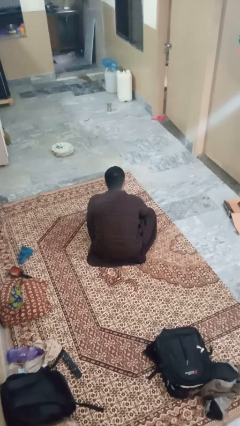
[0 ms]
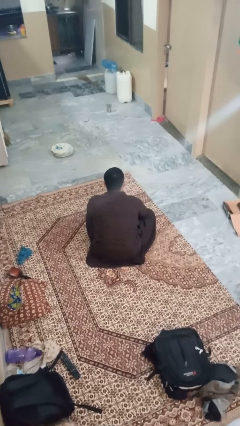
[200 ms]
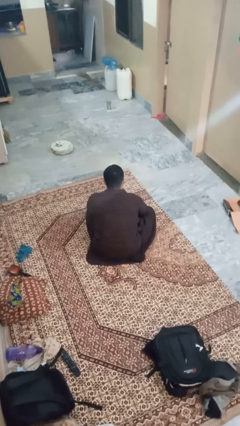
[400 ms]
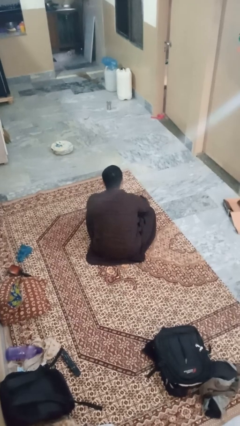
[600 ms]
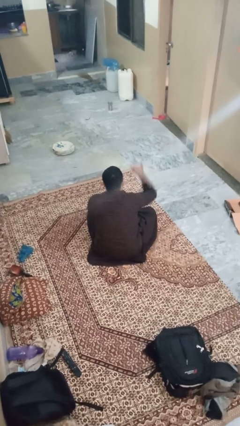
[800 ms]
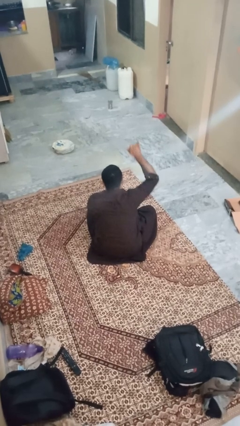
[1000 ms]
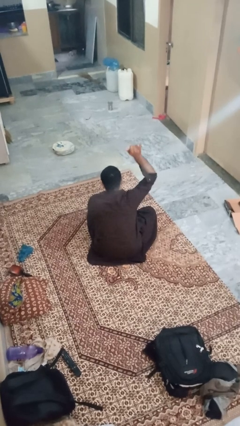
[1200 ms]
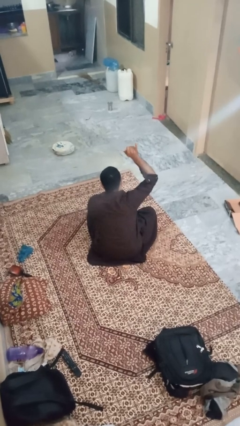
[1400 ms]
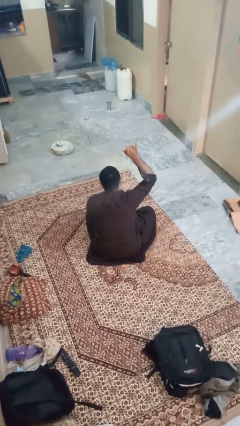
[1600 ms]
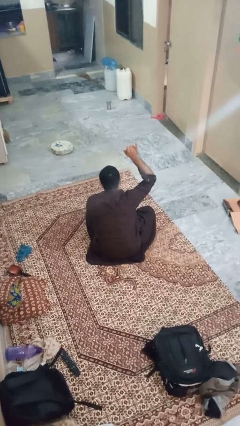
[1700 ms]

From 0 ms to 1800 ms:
person gestures hang loose

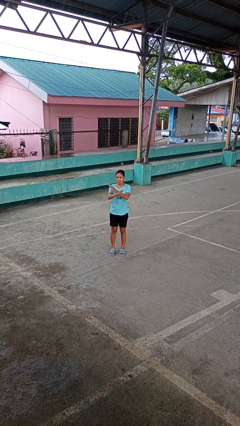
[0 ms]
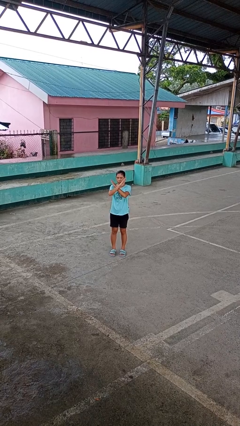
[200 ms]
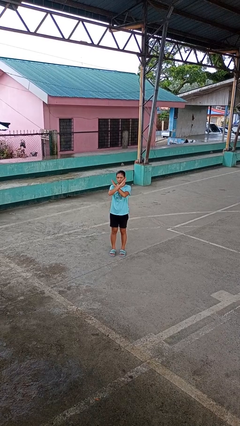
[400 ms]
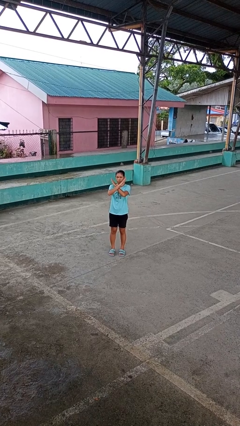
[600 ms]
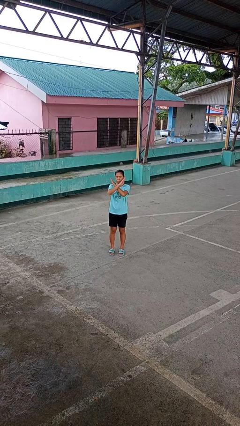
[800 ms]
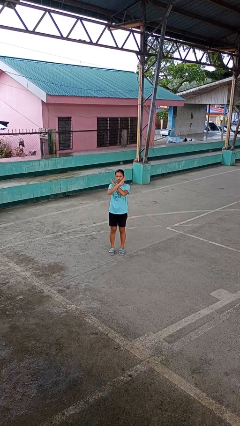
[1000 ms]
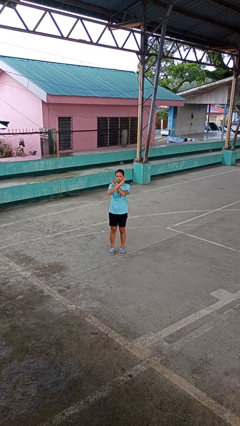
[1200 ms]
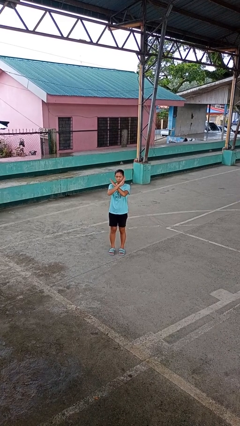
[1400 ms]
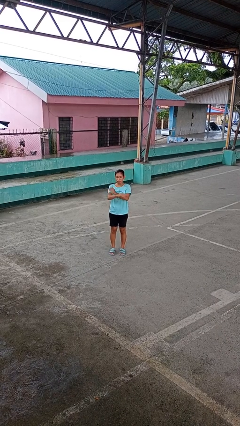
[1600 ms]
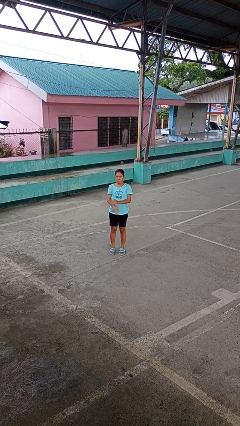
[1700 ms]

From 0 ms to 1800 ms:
person gestures arms x

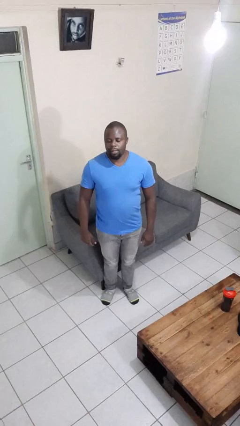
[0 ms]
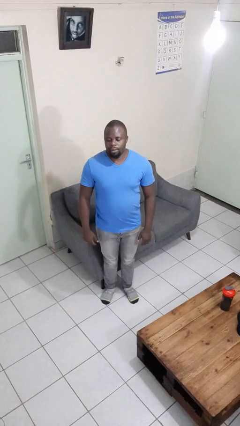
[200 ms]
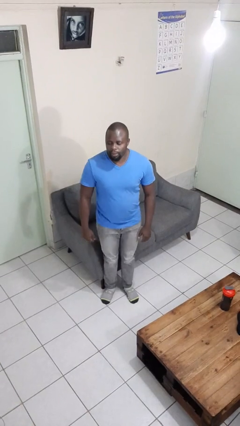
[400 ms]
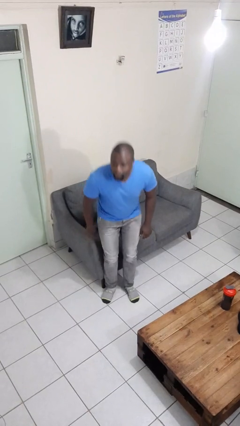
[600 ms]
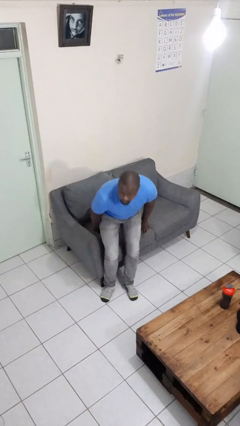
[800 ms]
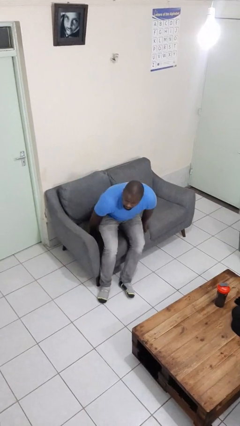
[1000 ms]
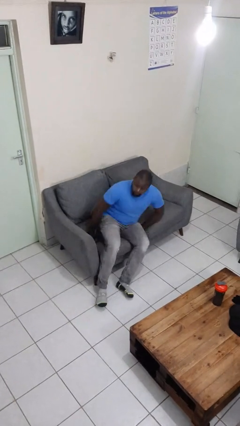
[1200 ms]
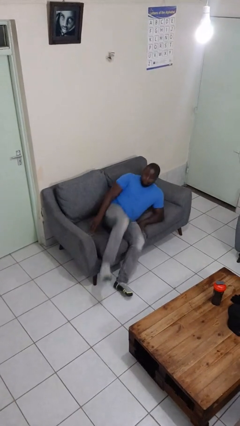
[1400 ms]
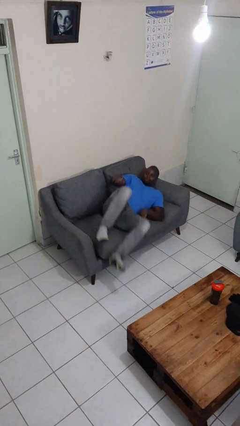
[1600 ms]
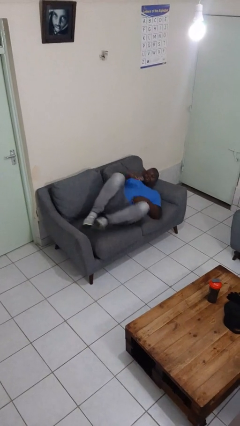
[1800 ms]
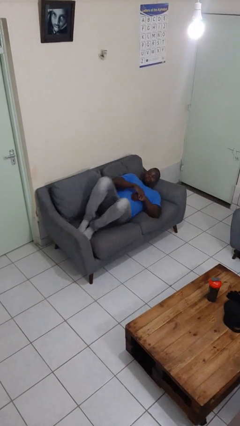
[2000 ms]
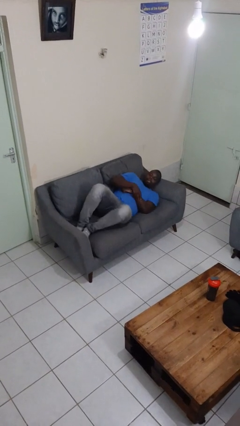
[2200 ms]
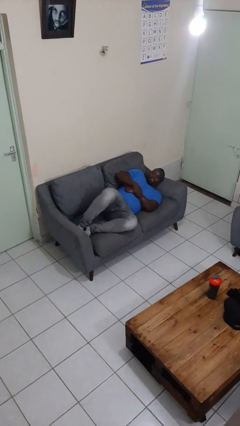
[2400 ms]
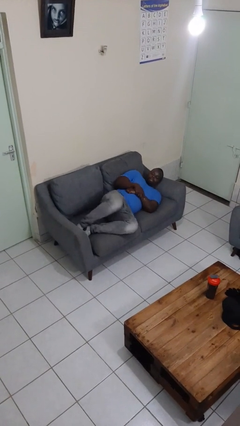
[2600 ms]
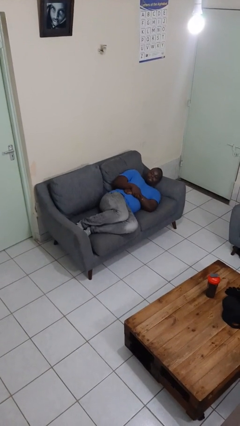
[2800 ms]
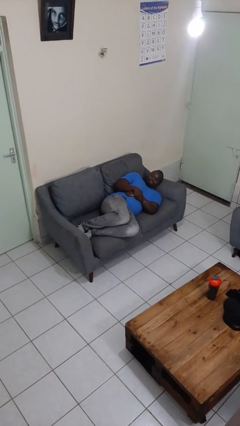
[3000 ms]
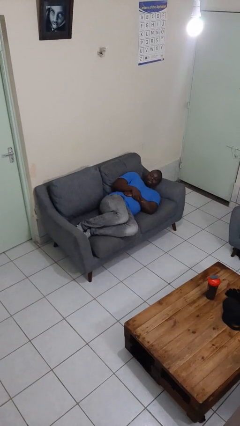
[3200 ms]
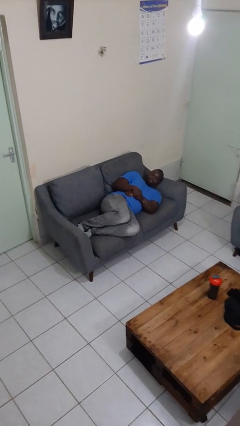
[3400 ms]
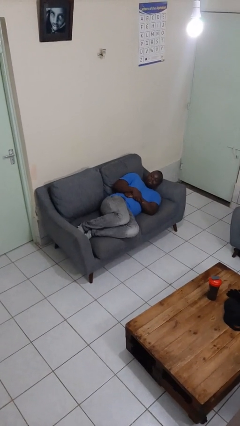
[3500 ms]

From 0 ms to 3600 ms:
person lies down on couch

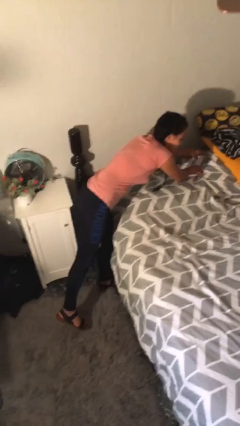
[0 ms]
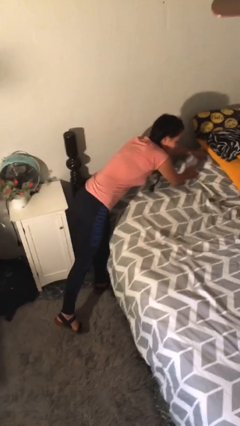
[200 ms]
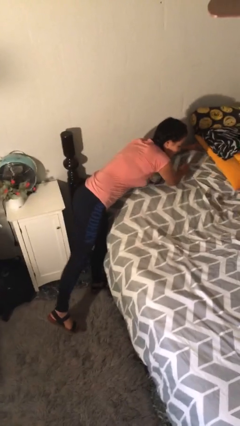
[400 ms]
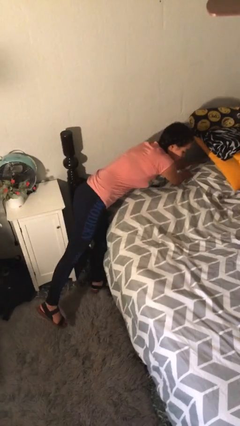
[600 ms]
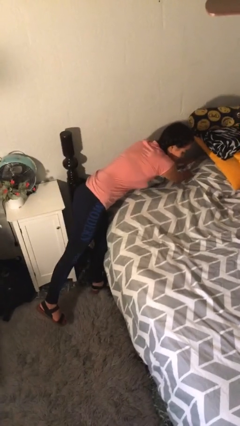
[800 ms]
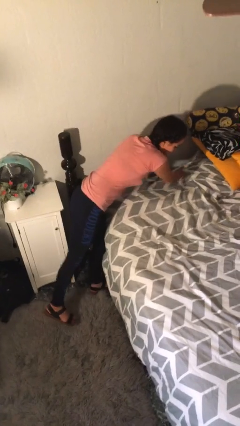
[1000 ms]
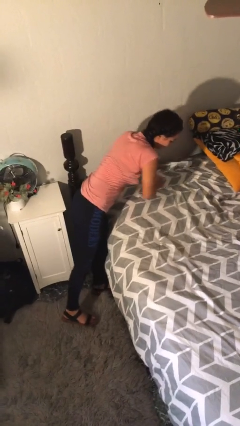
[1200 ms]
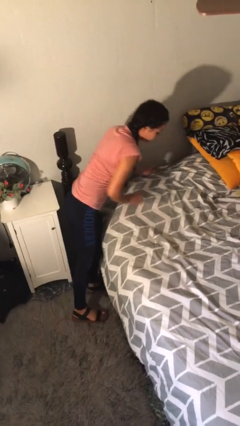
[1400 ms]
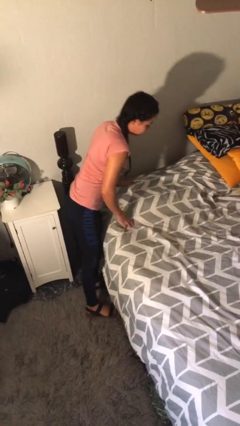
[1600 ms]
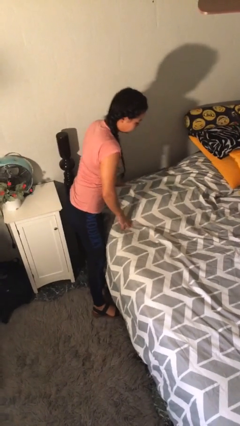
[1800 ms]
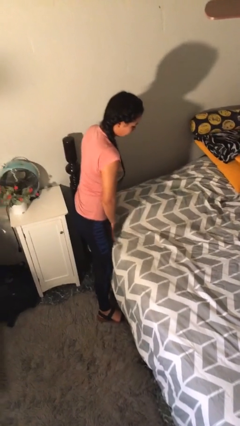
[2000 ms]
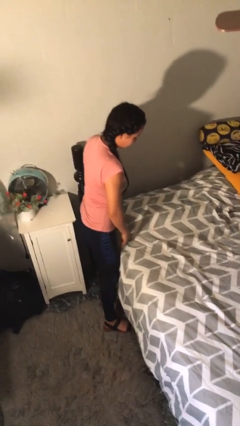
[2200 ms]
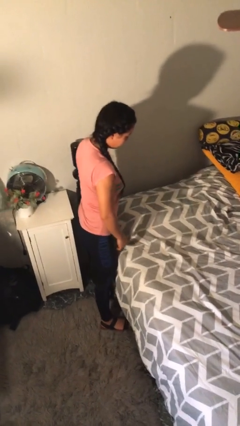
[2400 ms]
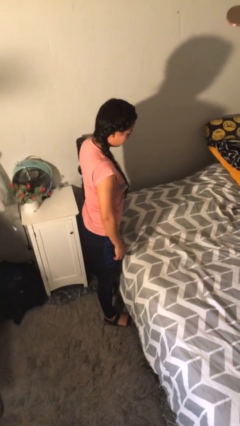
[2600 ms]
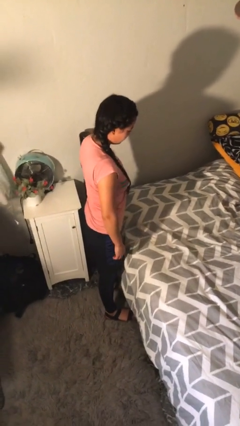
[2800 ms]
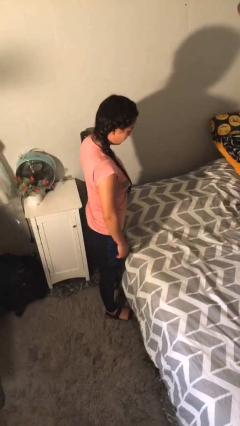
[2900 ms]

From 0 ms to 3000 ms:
person makes bed

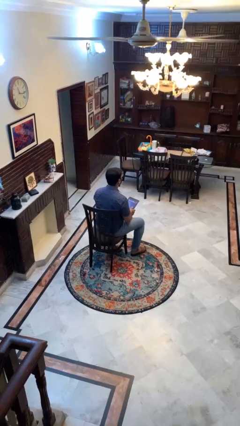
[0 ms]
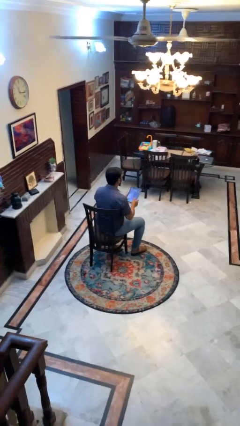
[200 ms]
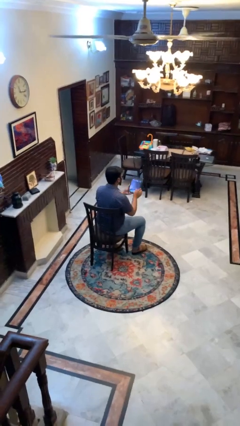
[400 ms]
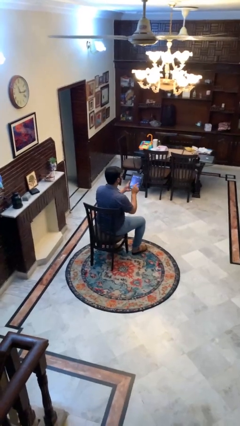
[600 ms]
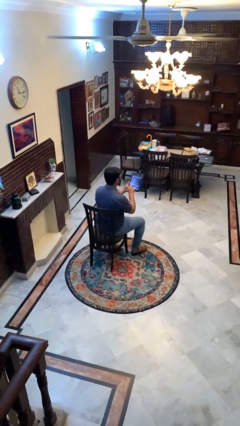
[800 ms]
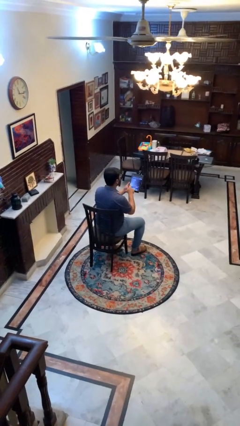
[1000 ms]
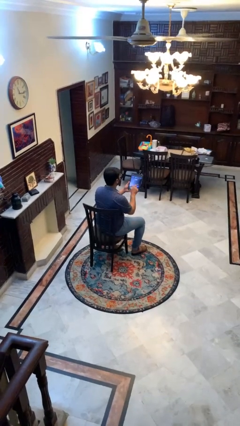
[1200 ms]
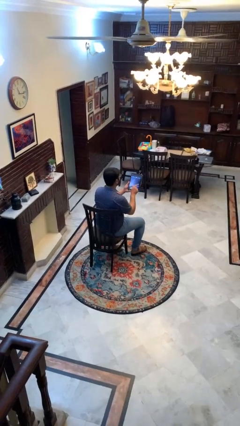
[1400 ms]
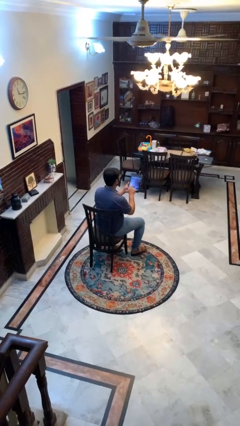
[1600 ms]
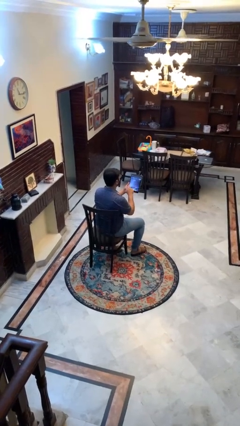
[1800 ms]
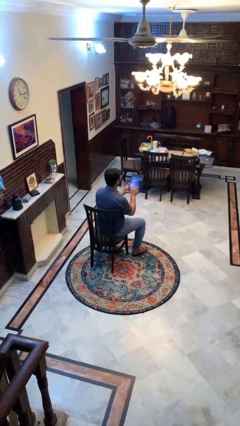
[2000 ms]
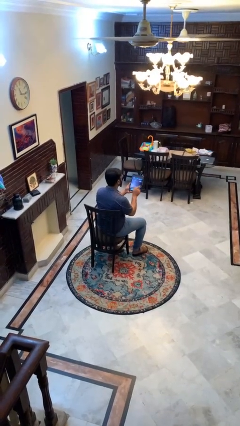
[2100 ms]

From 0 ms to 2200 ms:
person interacts with tablet

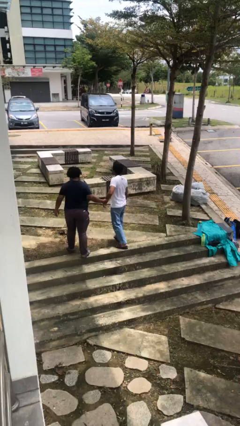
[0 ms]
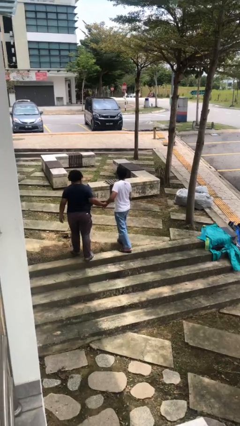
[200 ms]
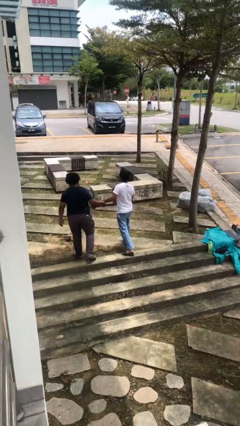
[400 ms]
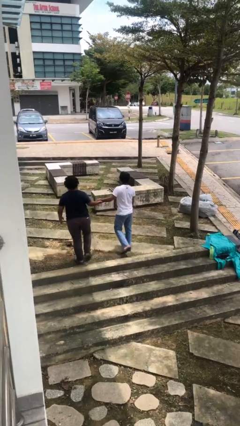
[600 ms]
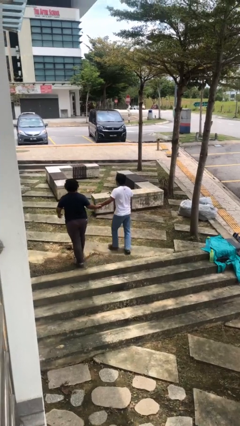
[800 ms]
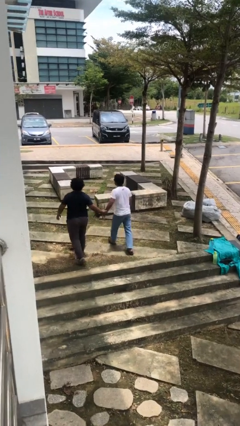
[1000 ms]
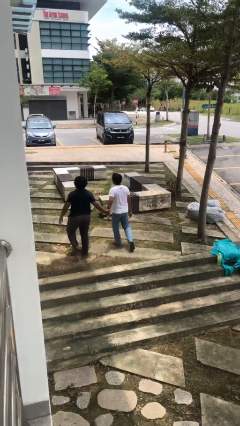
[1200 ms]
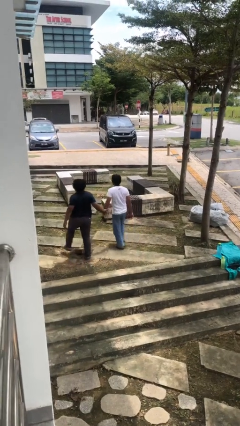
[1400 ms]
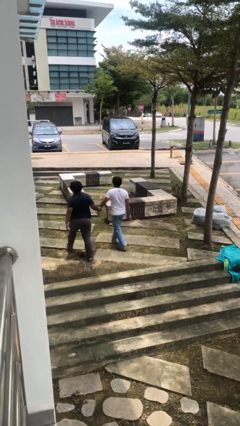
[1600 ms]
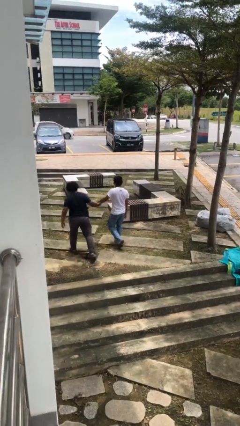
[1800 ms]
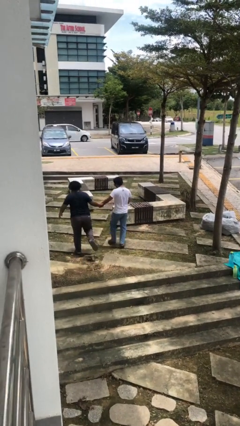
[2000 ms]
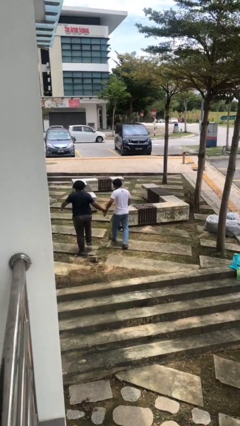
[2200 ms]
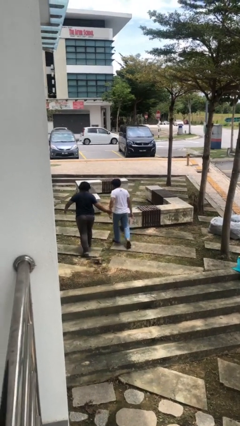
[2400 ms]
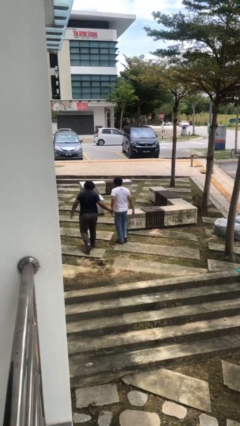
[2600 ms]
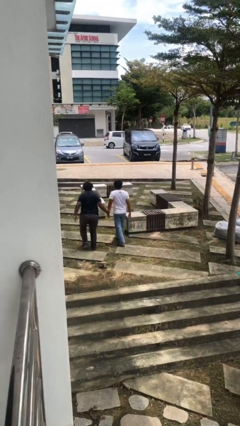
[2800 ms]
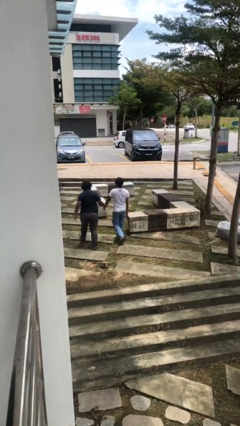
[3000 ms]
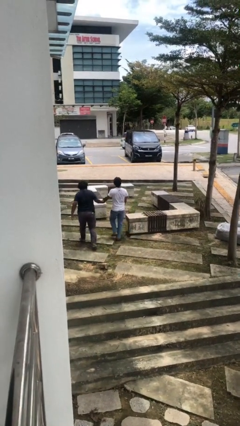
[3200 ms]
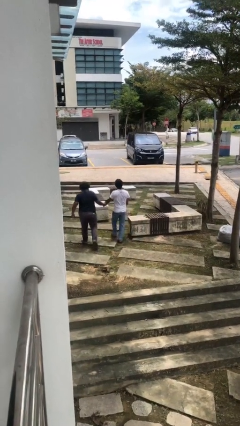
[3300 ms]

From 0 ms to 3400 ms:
person holds hand

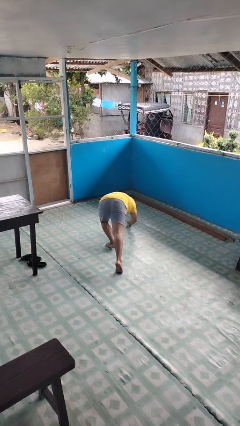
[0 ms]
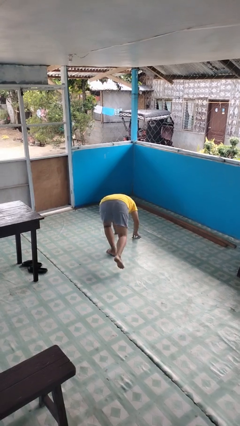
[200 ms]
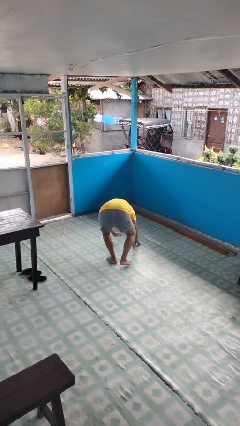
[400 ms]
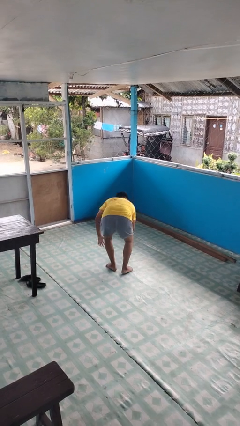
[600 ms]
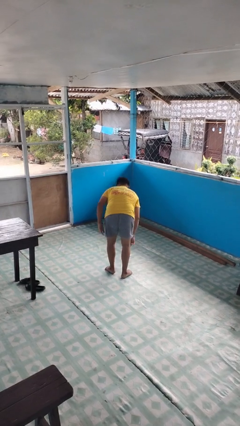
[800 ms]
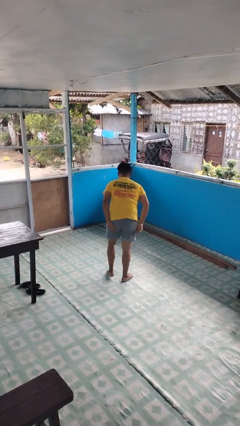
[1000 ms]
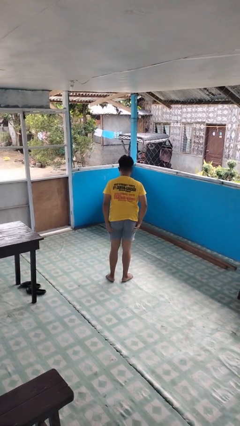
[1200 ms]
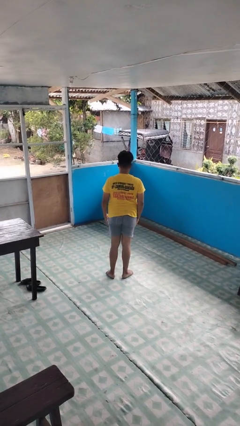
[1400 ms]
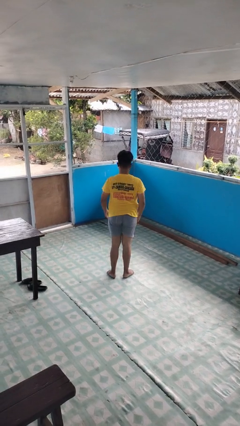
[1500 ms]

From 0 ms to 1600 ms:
person stands up from floor
